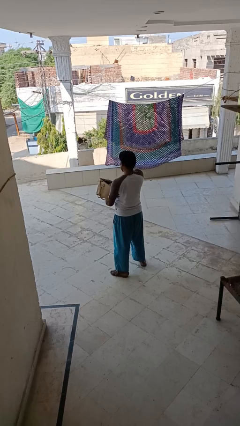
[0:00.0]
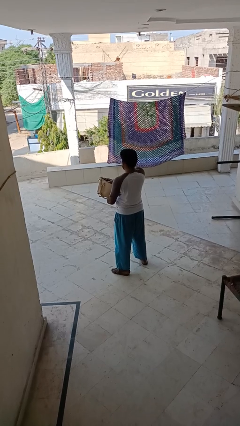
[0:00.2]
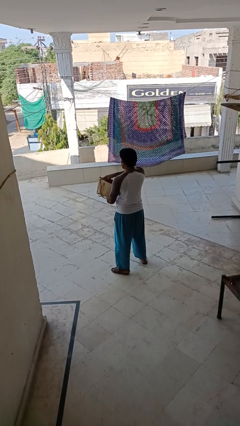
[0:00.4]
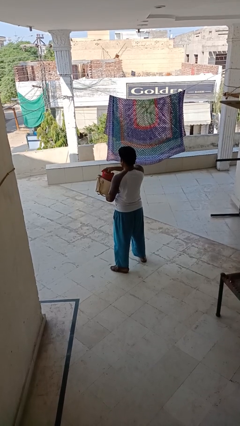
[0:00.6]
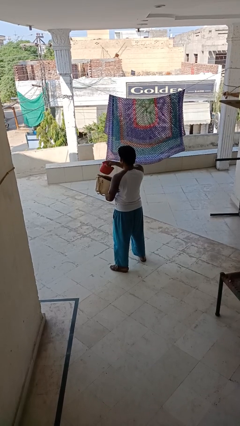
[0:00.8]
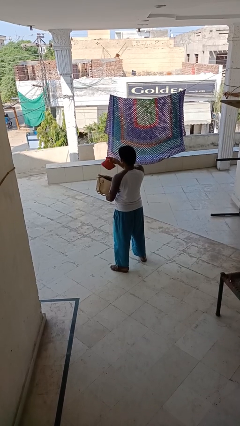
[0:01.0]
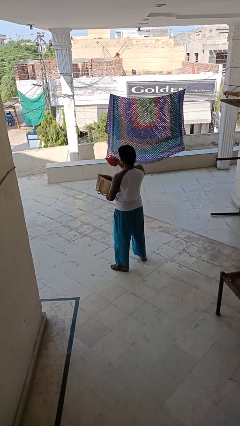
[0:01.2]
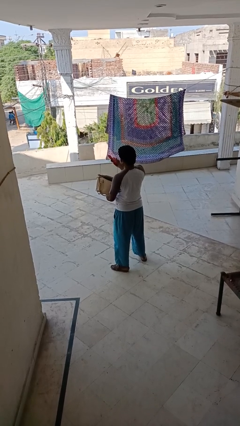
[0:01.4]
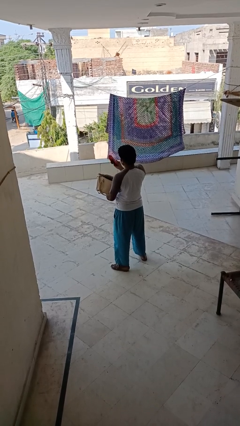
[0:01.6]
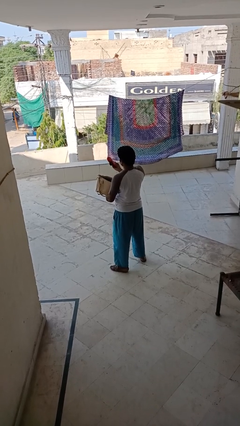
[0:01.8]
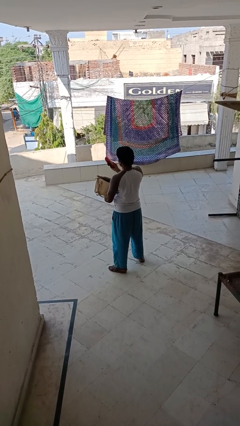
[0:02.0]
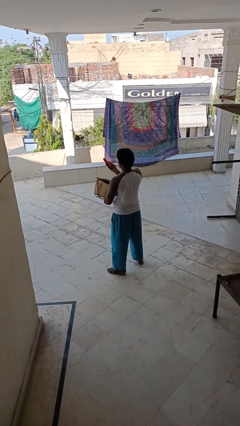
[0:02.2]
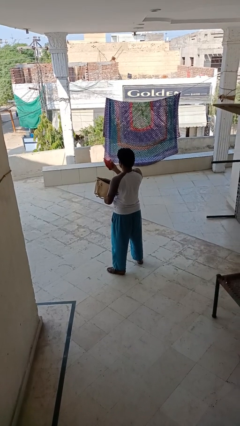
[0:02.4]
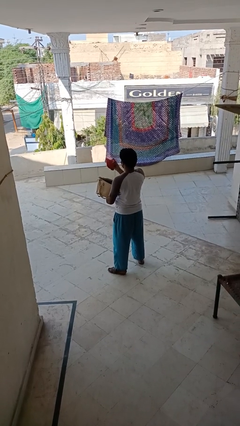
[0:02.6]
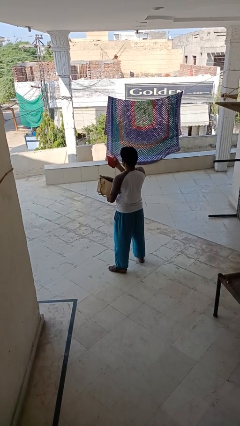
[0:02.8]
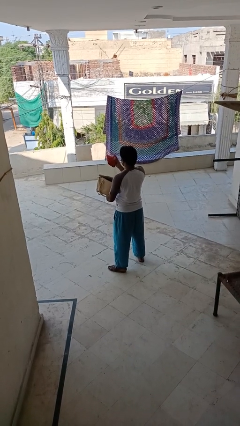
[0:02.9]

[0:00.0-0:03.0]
person takes object from purse

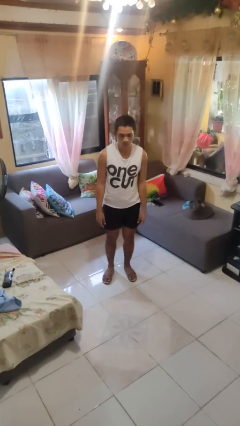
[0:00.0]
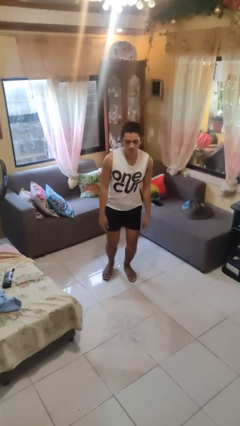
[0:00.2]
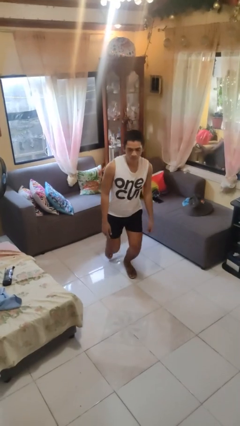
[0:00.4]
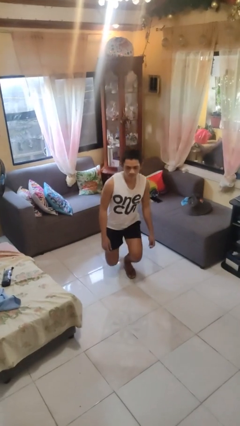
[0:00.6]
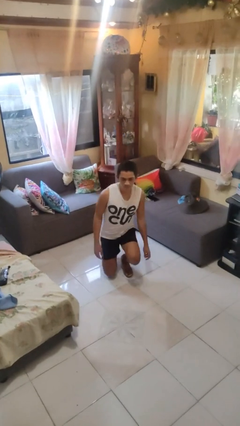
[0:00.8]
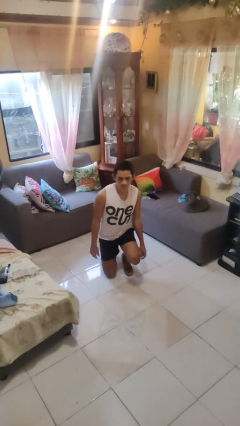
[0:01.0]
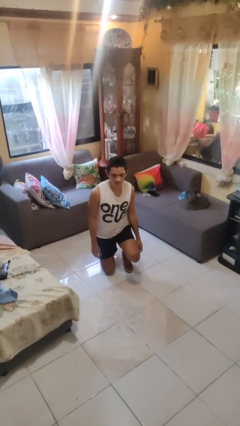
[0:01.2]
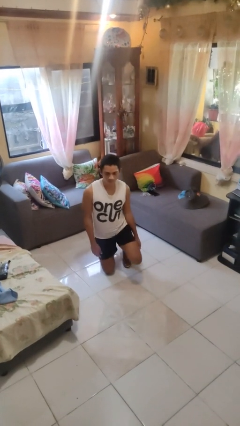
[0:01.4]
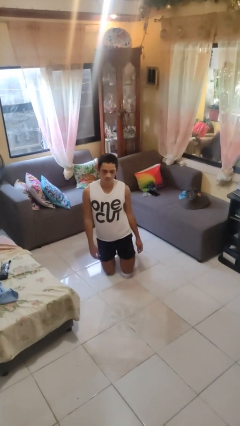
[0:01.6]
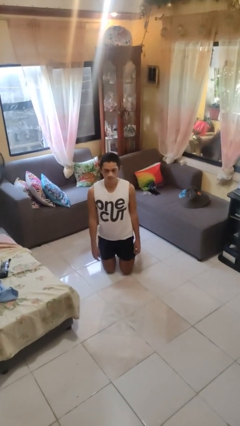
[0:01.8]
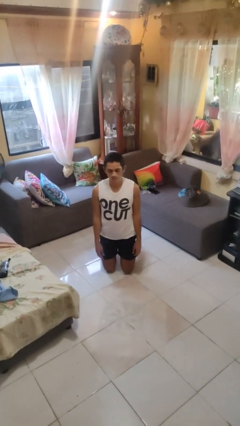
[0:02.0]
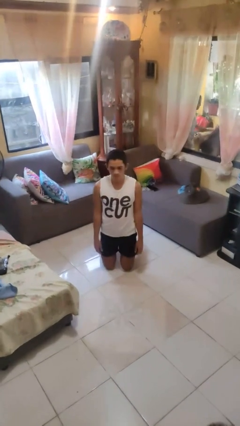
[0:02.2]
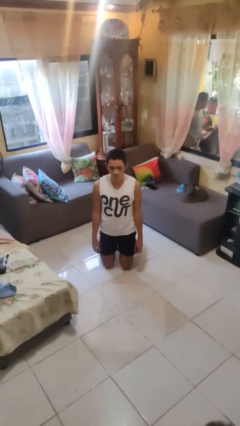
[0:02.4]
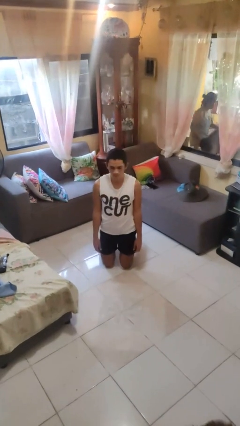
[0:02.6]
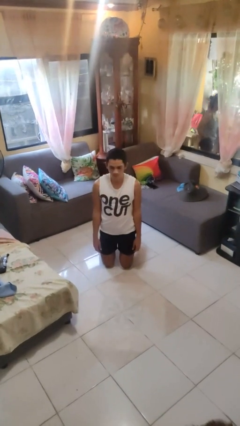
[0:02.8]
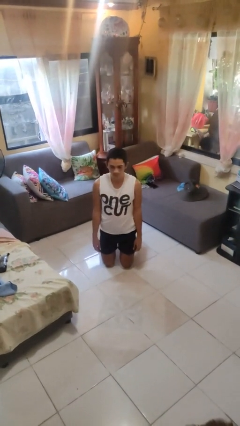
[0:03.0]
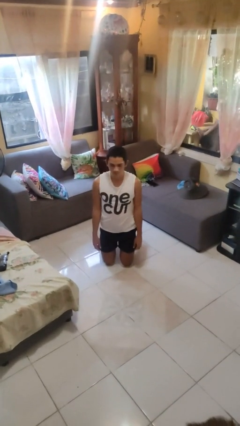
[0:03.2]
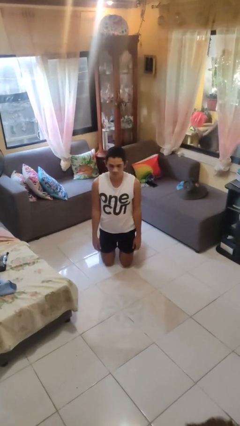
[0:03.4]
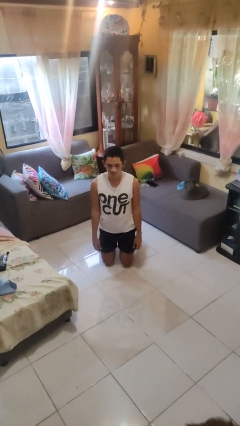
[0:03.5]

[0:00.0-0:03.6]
person kneels

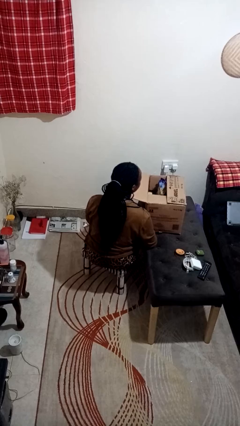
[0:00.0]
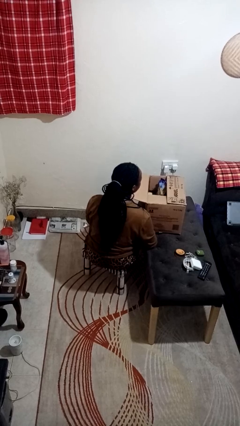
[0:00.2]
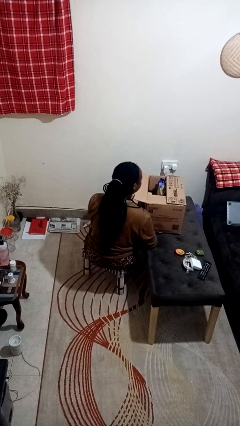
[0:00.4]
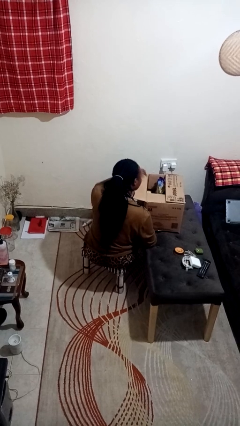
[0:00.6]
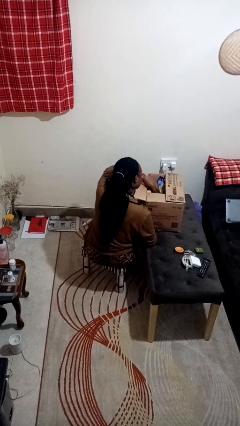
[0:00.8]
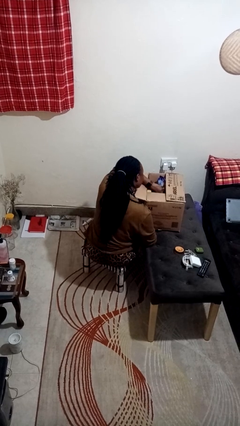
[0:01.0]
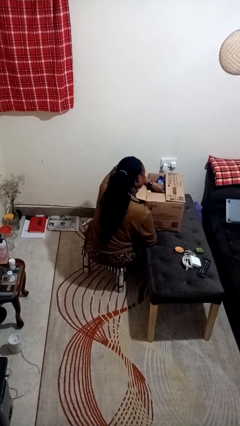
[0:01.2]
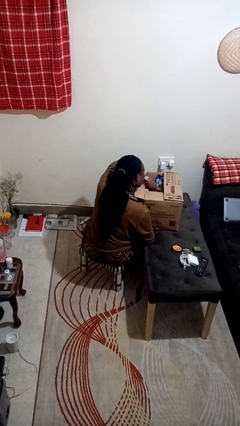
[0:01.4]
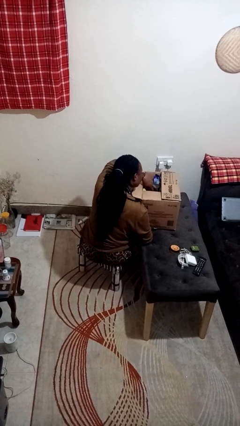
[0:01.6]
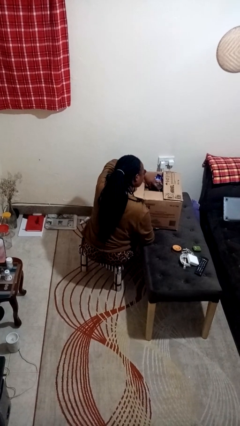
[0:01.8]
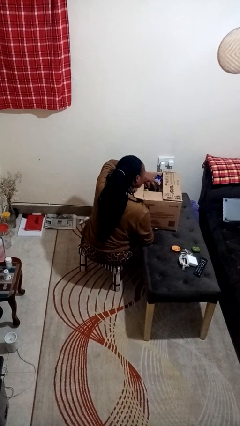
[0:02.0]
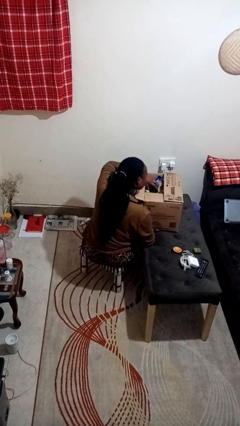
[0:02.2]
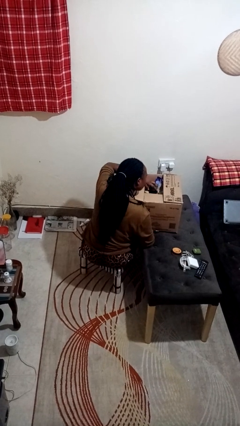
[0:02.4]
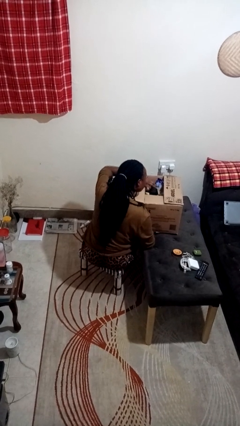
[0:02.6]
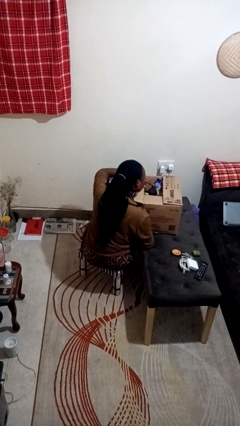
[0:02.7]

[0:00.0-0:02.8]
person searches in box

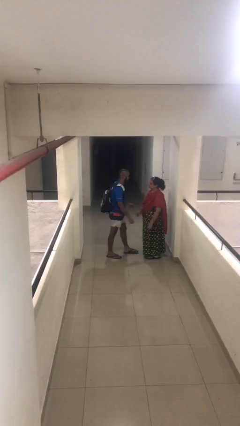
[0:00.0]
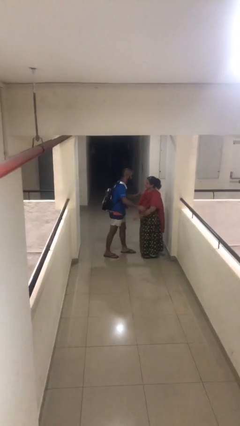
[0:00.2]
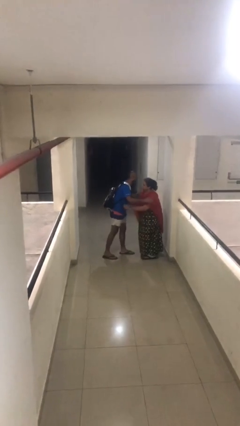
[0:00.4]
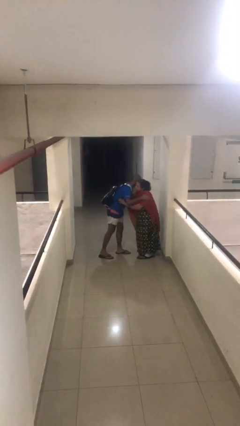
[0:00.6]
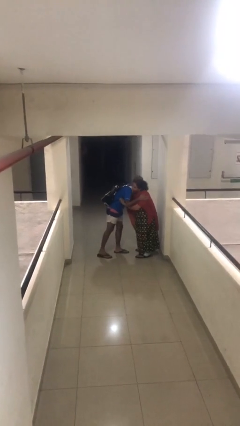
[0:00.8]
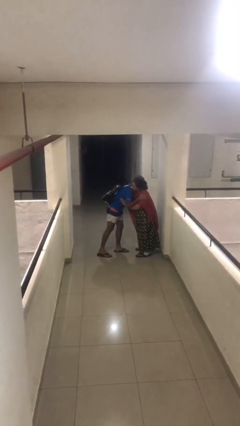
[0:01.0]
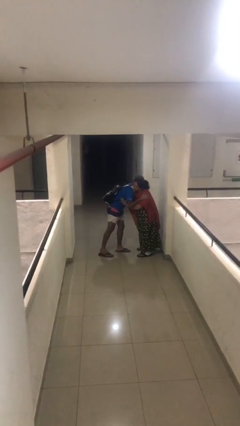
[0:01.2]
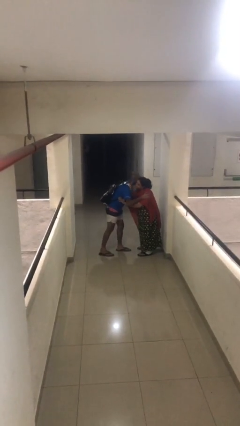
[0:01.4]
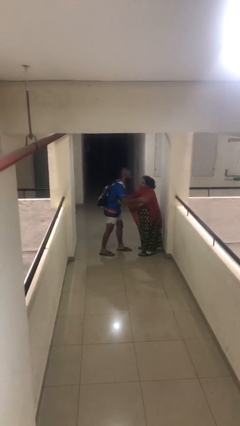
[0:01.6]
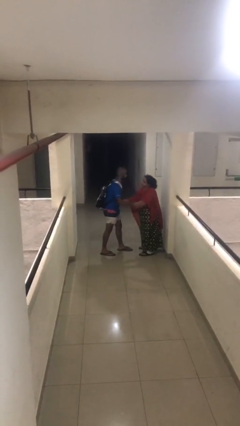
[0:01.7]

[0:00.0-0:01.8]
person embraces person

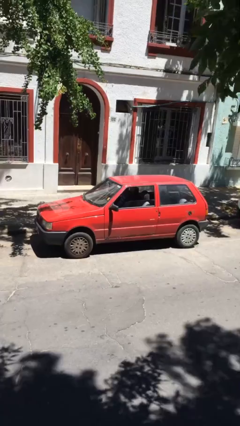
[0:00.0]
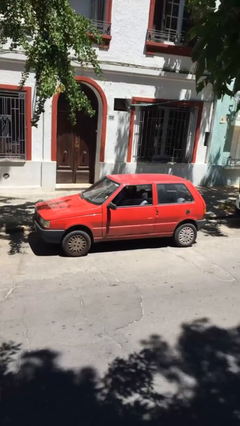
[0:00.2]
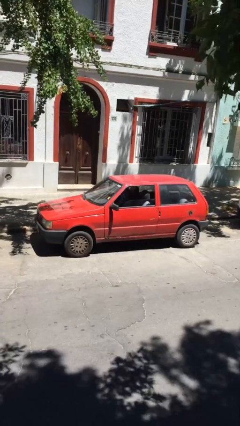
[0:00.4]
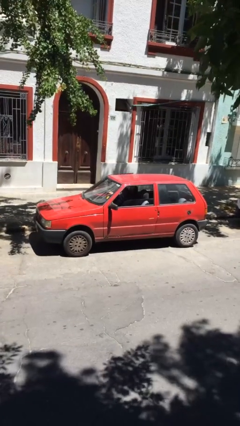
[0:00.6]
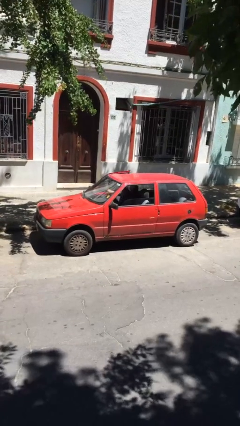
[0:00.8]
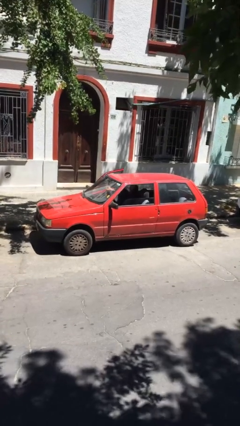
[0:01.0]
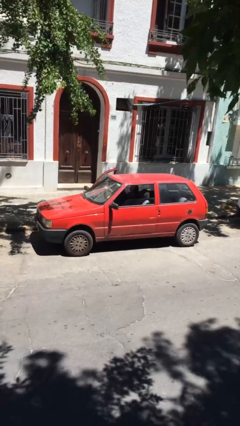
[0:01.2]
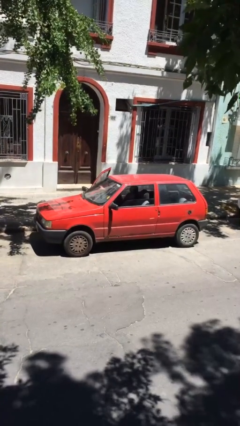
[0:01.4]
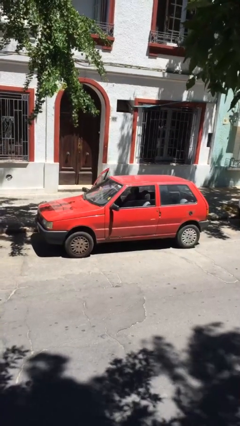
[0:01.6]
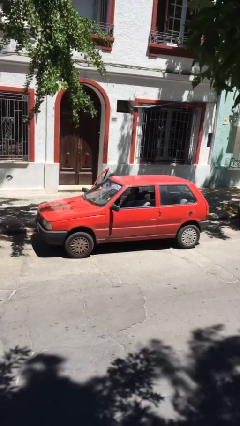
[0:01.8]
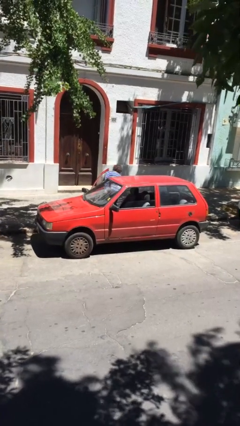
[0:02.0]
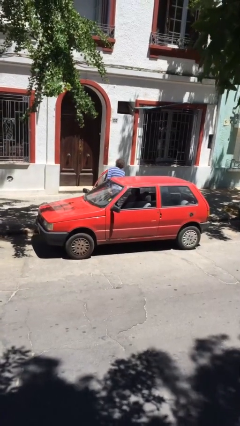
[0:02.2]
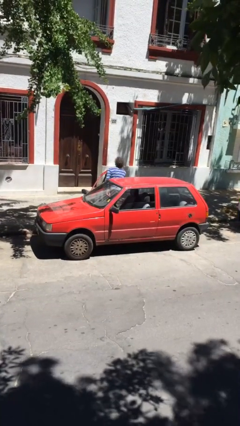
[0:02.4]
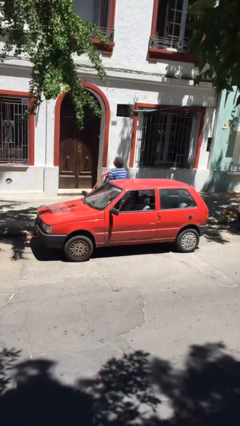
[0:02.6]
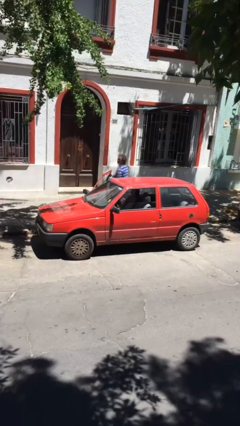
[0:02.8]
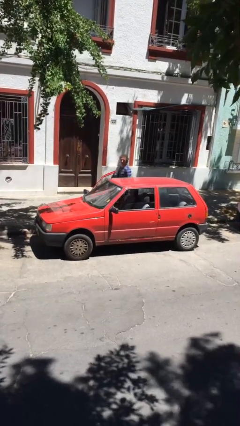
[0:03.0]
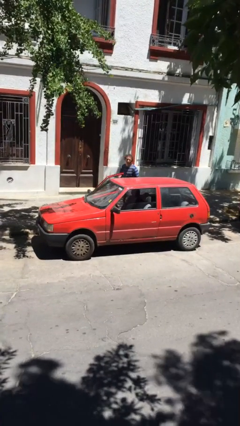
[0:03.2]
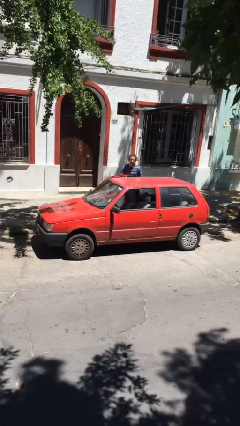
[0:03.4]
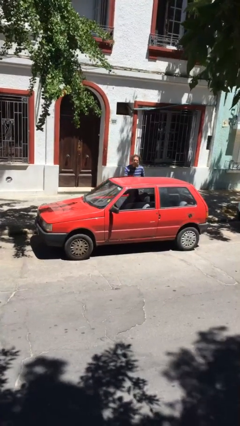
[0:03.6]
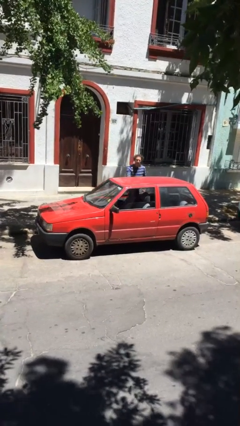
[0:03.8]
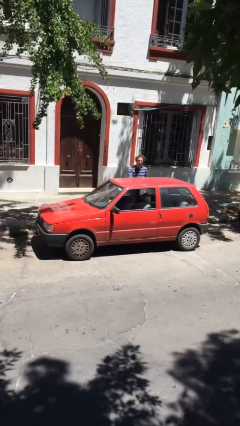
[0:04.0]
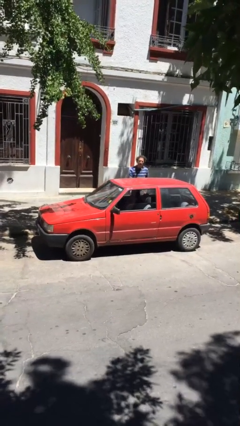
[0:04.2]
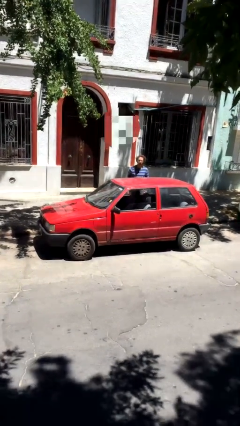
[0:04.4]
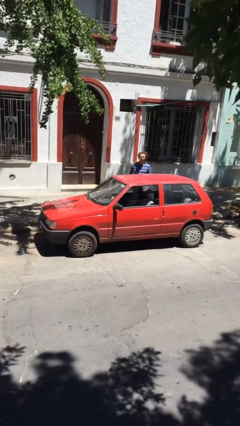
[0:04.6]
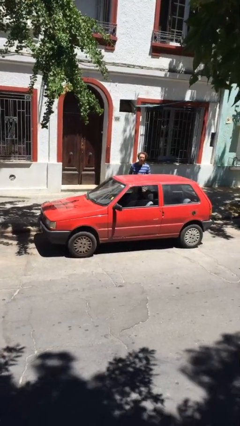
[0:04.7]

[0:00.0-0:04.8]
car drops off person

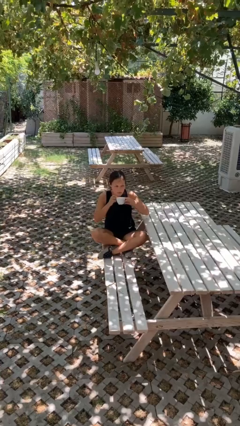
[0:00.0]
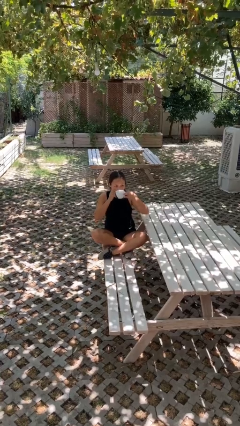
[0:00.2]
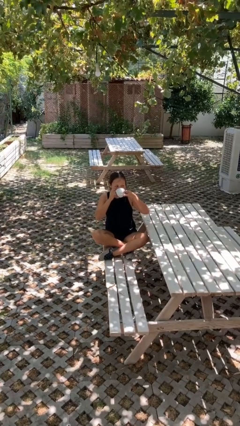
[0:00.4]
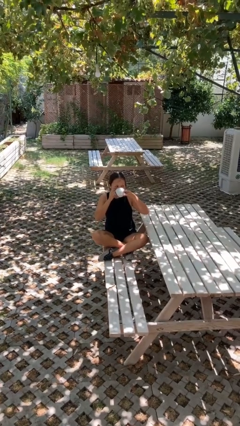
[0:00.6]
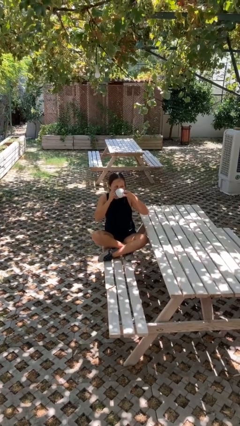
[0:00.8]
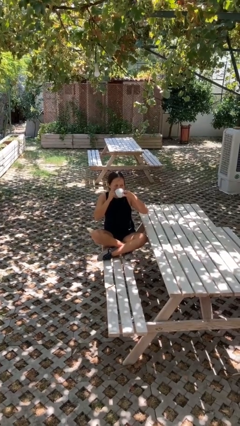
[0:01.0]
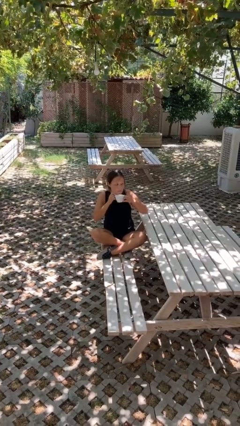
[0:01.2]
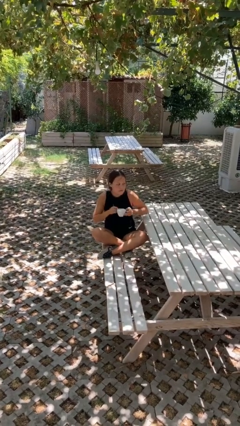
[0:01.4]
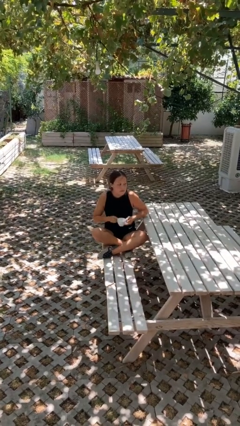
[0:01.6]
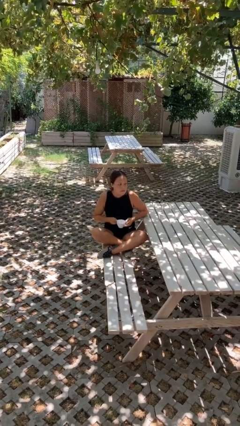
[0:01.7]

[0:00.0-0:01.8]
person drinks from mug
